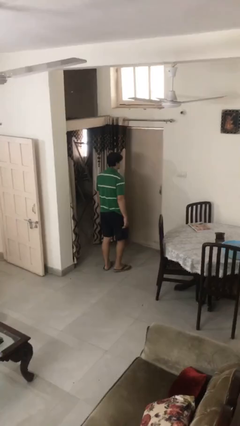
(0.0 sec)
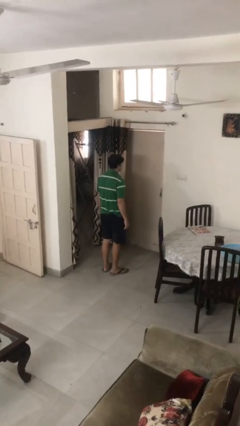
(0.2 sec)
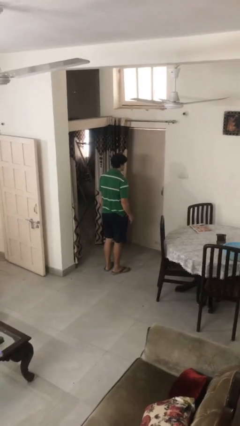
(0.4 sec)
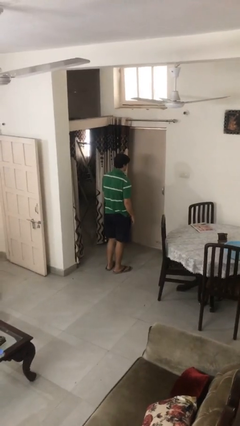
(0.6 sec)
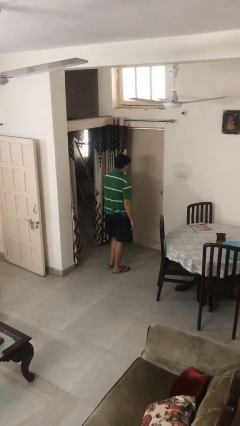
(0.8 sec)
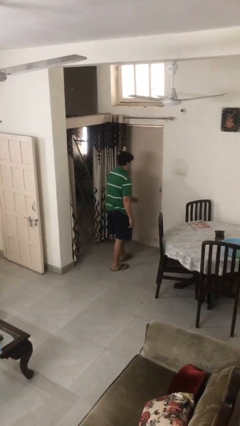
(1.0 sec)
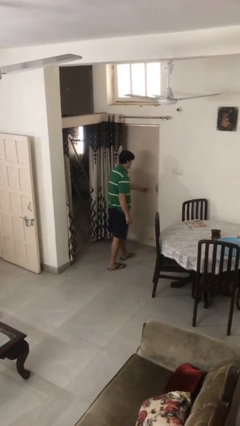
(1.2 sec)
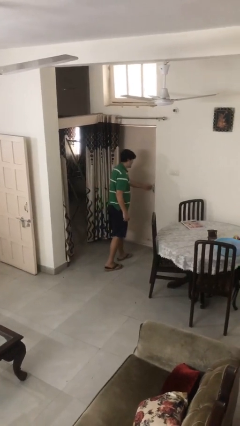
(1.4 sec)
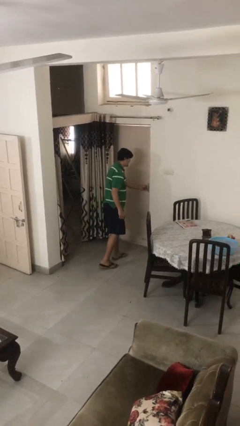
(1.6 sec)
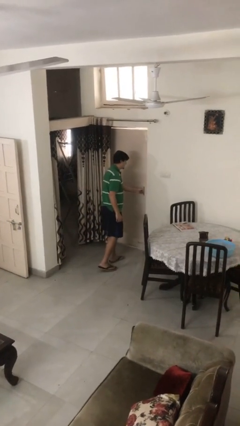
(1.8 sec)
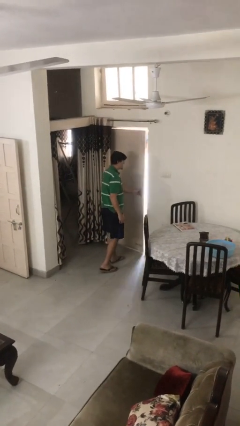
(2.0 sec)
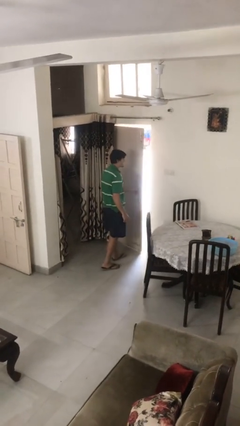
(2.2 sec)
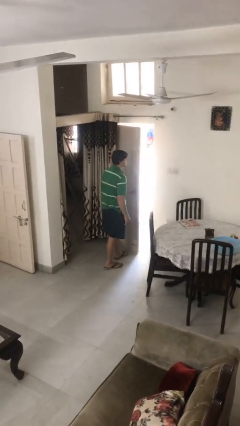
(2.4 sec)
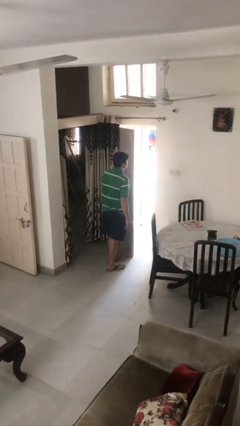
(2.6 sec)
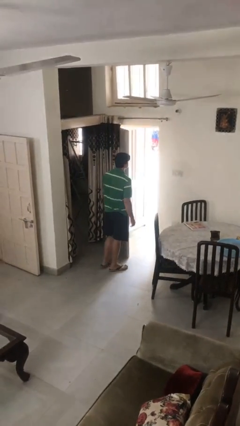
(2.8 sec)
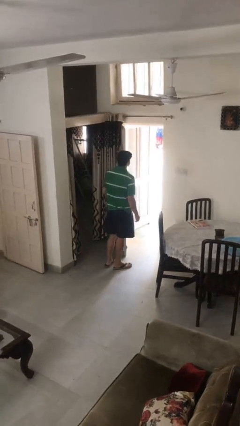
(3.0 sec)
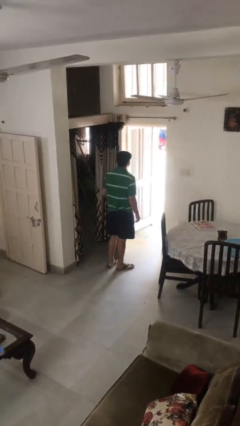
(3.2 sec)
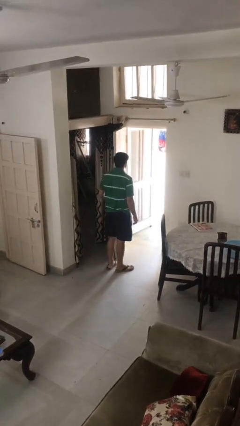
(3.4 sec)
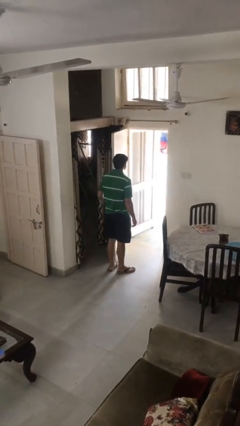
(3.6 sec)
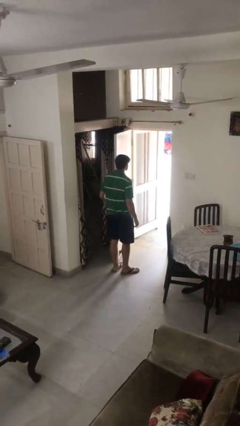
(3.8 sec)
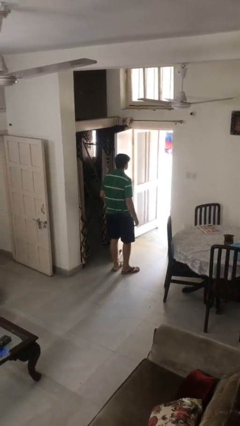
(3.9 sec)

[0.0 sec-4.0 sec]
person opens facility door

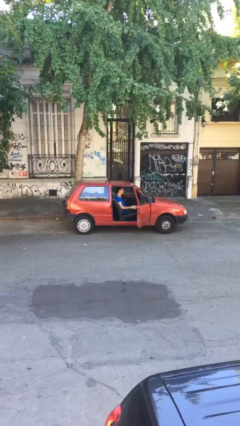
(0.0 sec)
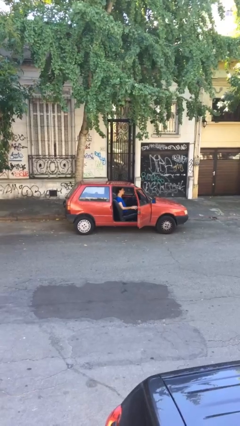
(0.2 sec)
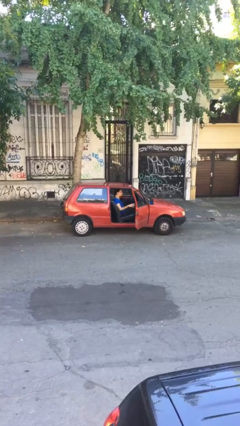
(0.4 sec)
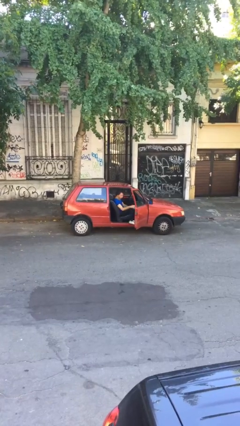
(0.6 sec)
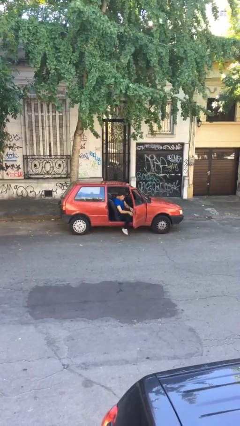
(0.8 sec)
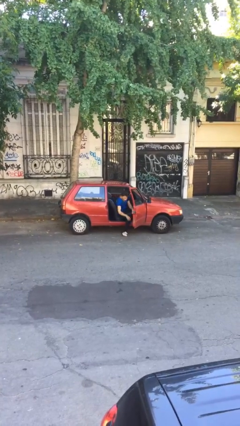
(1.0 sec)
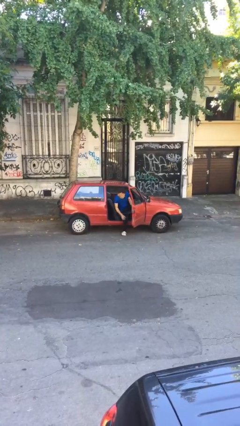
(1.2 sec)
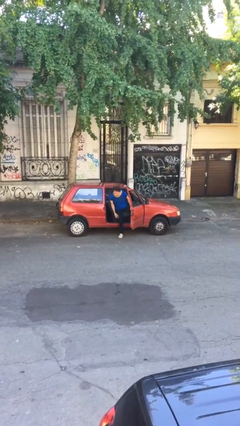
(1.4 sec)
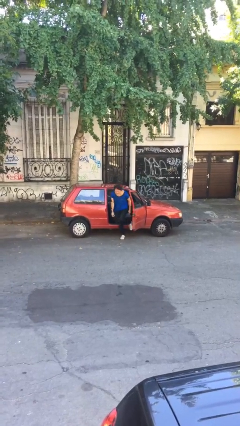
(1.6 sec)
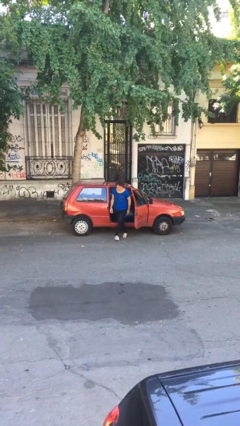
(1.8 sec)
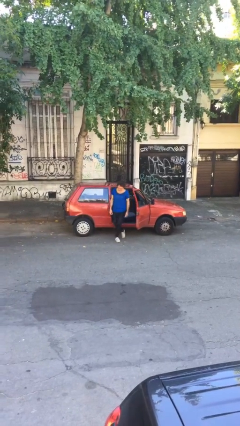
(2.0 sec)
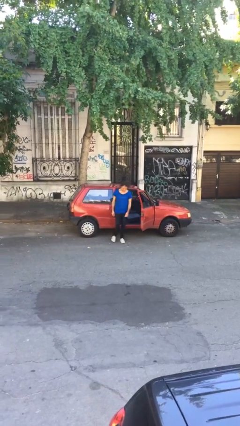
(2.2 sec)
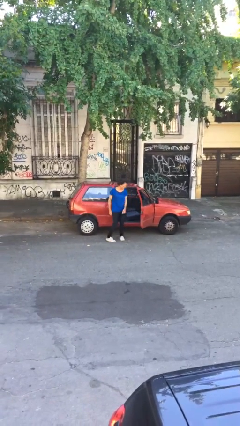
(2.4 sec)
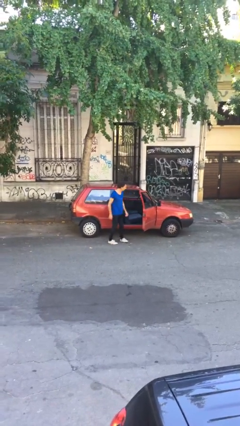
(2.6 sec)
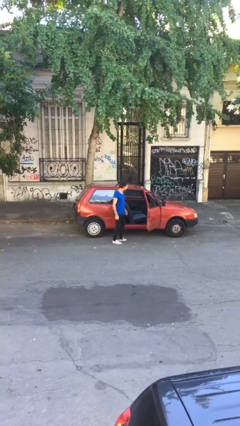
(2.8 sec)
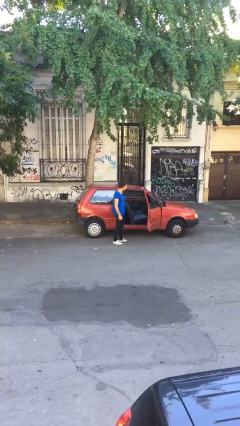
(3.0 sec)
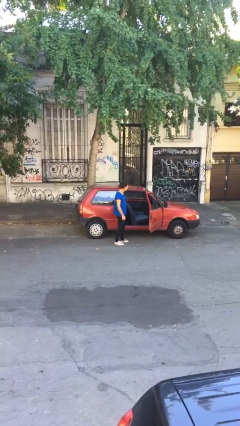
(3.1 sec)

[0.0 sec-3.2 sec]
person exits car

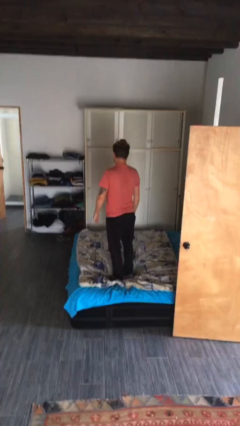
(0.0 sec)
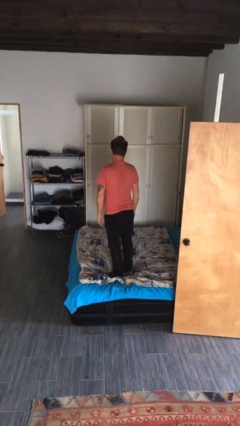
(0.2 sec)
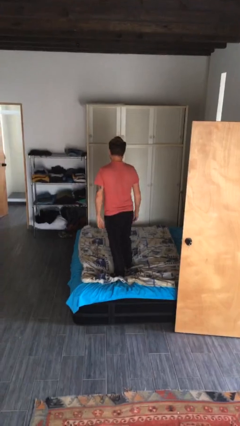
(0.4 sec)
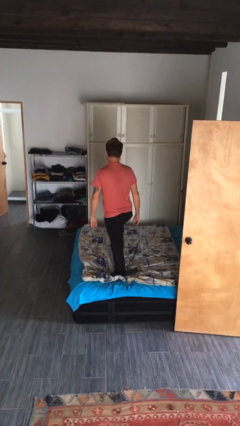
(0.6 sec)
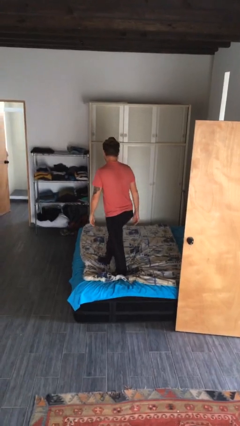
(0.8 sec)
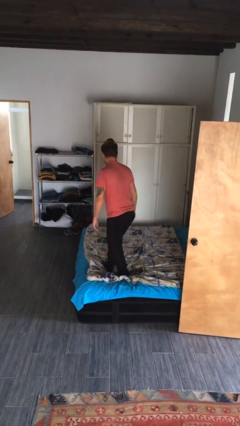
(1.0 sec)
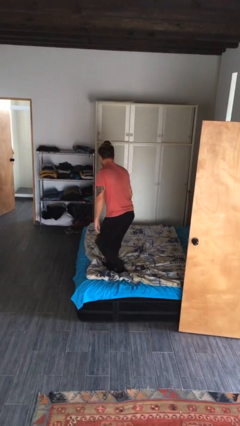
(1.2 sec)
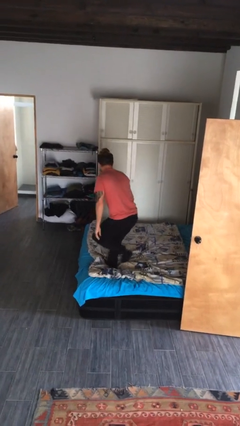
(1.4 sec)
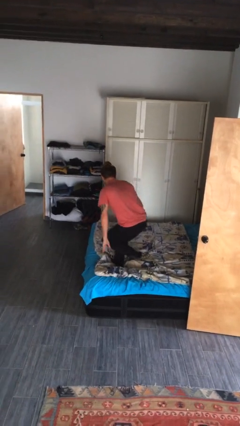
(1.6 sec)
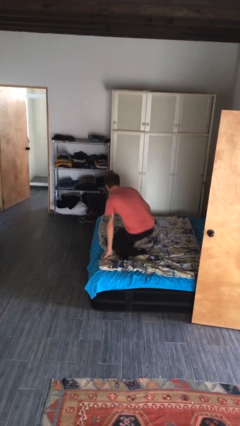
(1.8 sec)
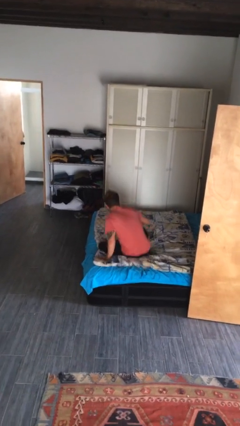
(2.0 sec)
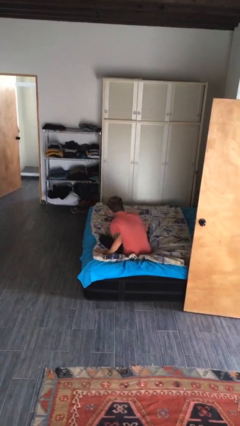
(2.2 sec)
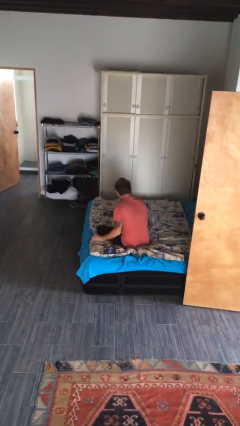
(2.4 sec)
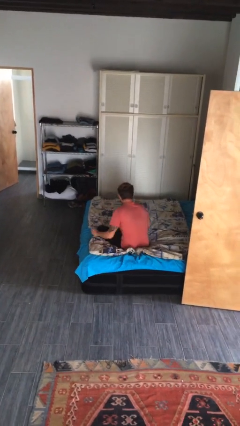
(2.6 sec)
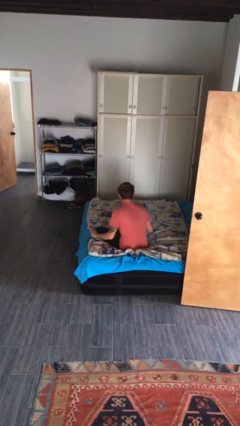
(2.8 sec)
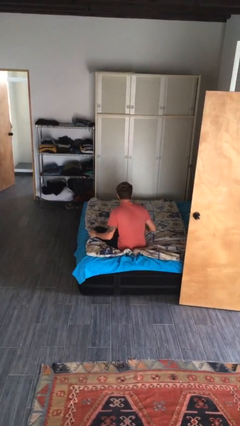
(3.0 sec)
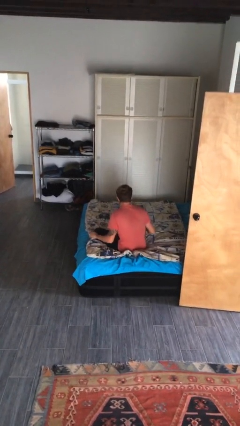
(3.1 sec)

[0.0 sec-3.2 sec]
person sits crisscross

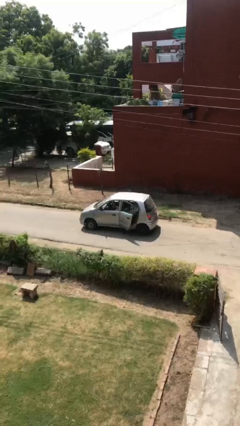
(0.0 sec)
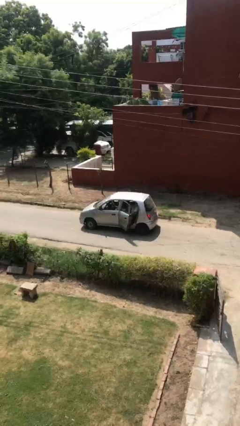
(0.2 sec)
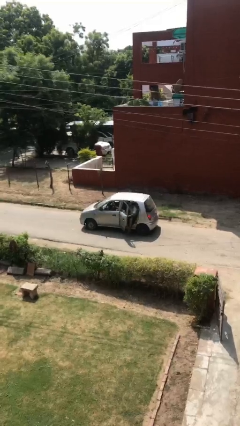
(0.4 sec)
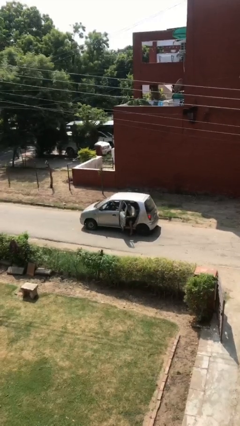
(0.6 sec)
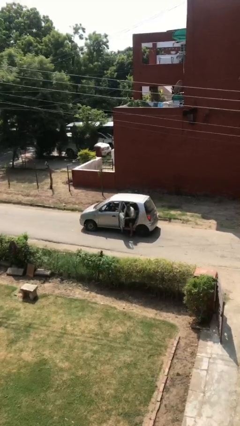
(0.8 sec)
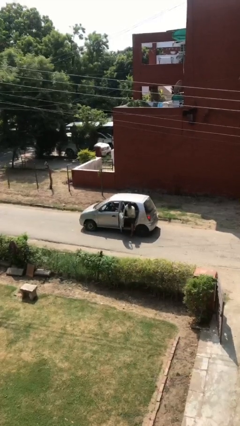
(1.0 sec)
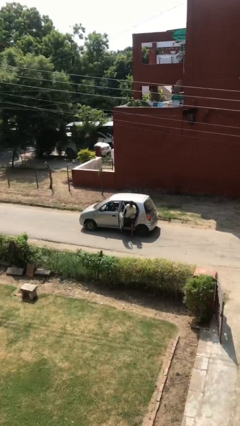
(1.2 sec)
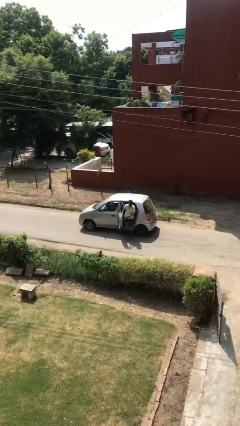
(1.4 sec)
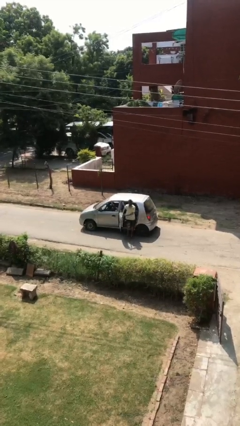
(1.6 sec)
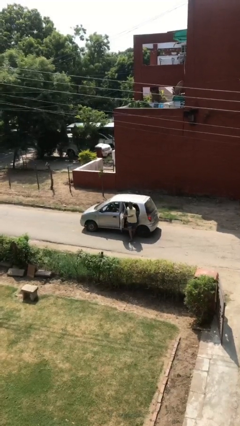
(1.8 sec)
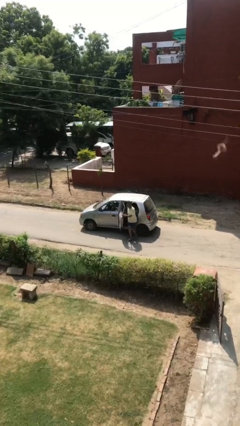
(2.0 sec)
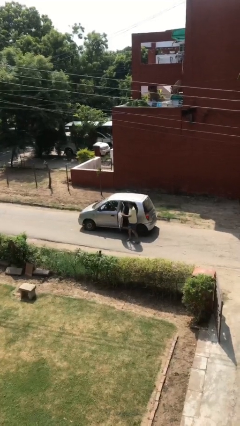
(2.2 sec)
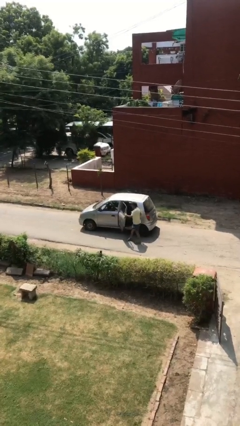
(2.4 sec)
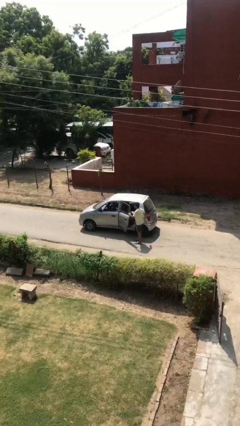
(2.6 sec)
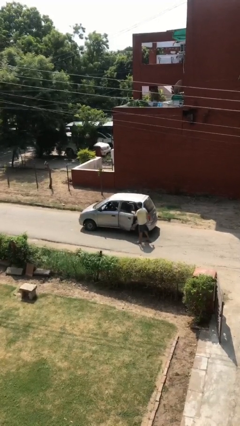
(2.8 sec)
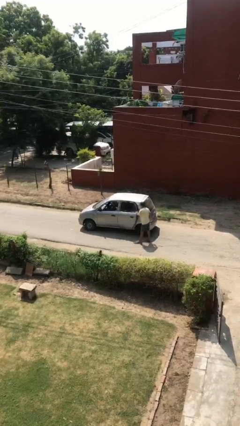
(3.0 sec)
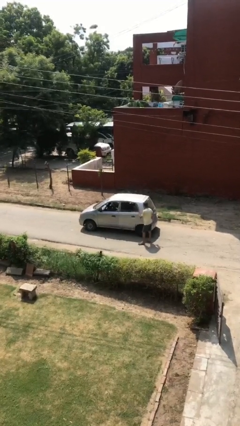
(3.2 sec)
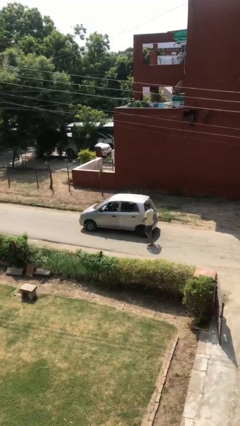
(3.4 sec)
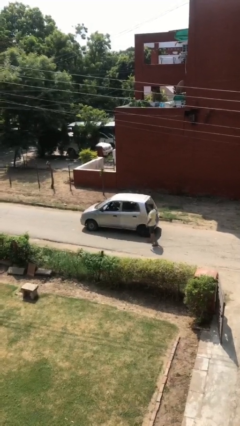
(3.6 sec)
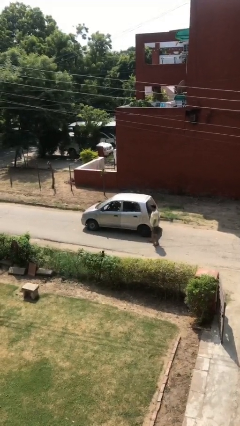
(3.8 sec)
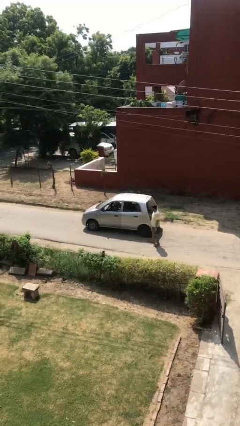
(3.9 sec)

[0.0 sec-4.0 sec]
car drops off person

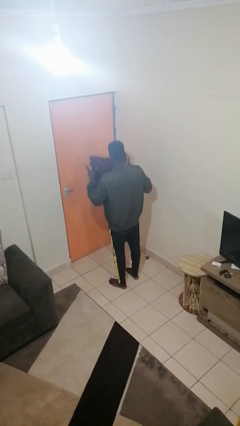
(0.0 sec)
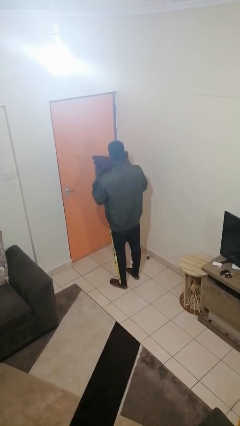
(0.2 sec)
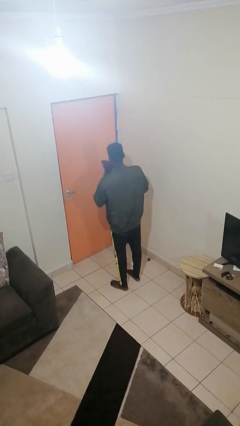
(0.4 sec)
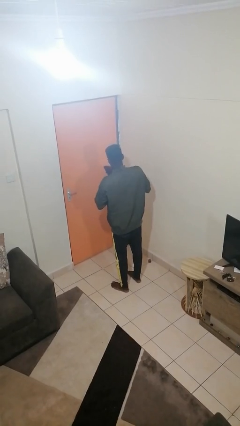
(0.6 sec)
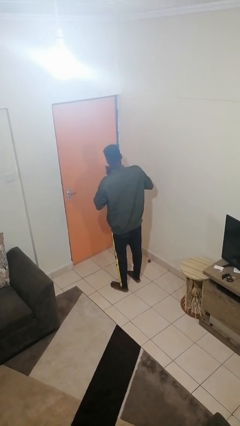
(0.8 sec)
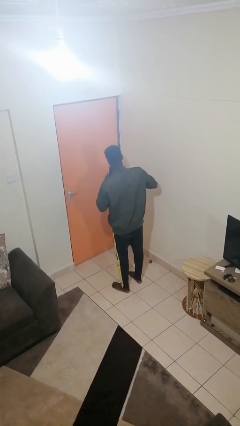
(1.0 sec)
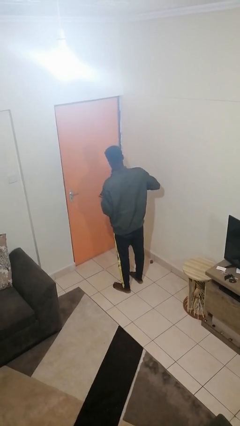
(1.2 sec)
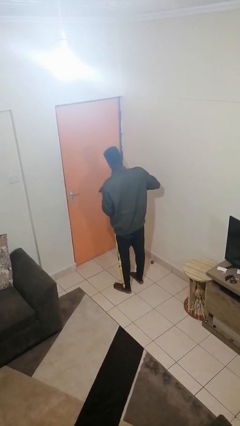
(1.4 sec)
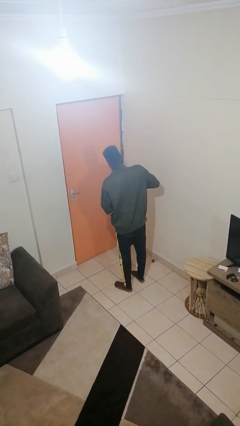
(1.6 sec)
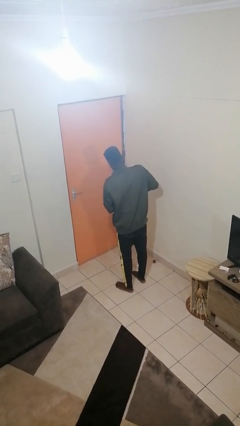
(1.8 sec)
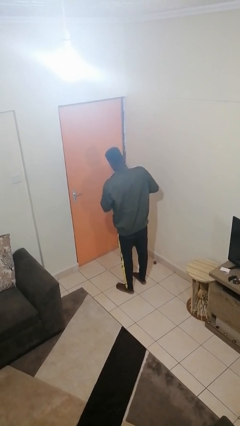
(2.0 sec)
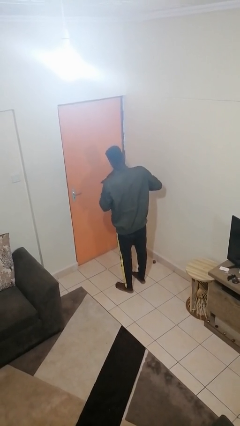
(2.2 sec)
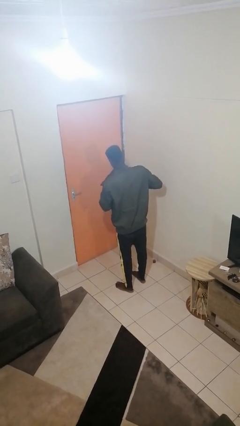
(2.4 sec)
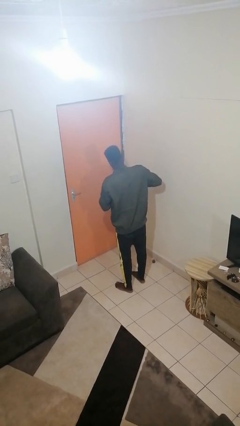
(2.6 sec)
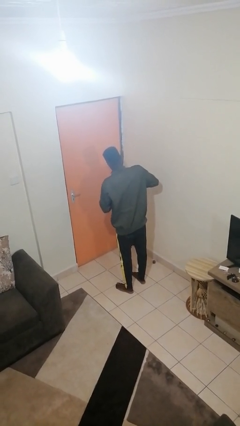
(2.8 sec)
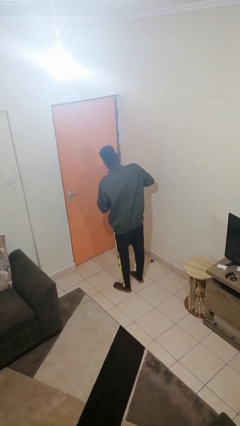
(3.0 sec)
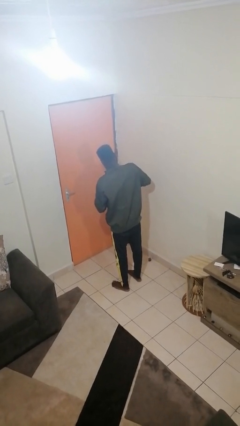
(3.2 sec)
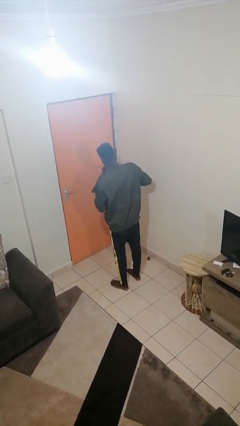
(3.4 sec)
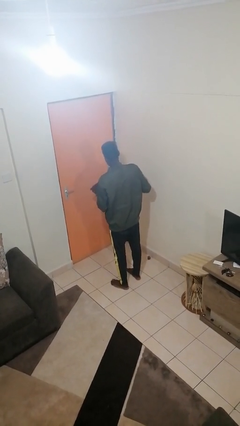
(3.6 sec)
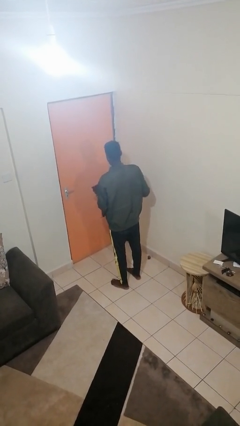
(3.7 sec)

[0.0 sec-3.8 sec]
person squeezes object
